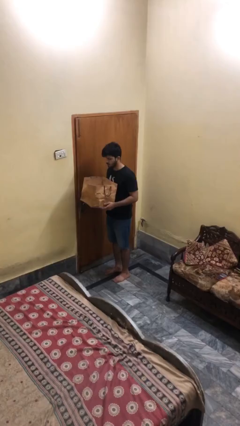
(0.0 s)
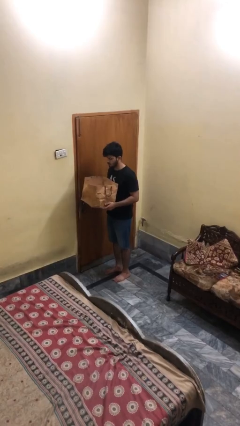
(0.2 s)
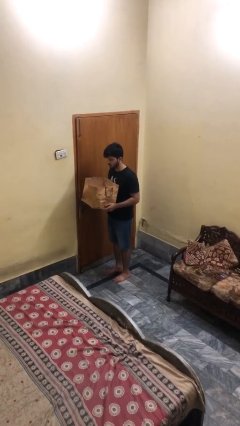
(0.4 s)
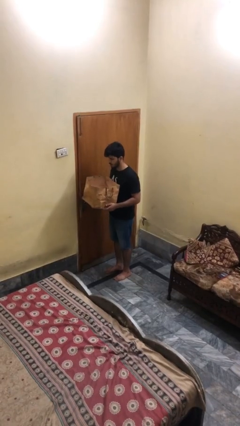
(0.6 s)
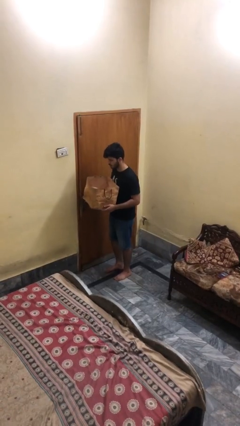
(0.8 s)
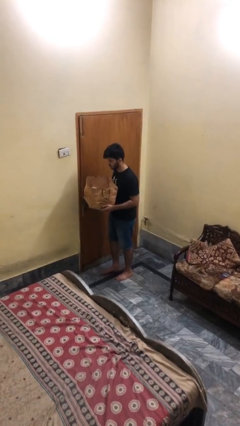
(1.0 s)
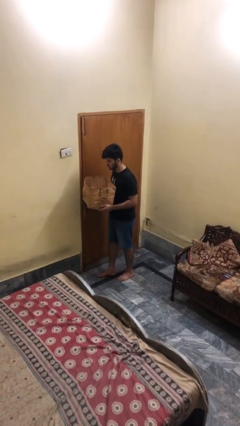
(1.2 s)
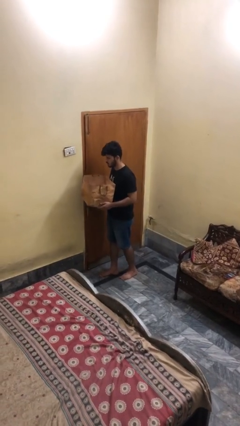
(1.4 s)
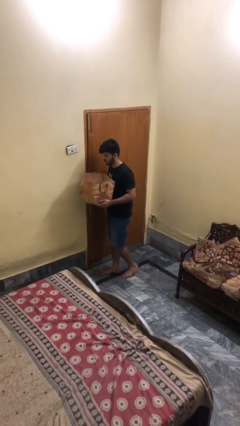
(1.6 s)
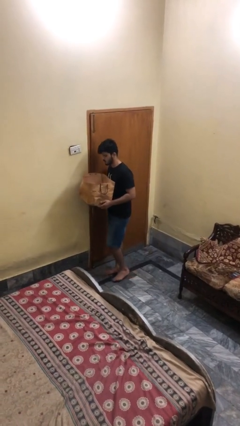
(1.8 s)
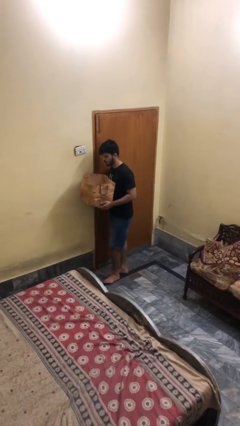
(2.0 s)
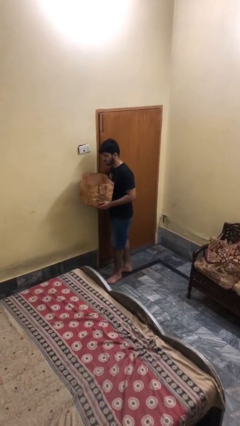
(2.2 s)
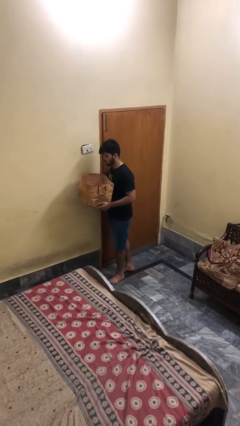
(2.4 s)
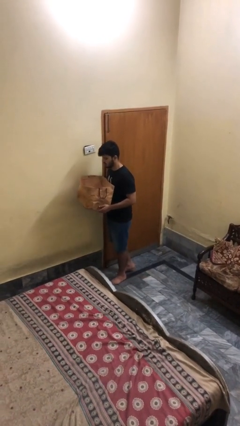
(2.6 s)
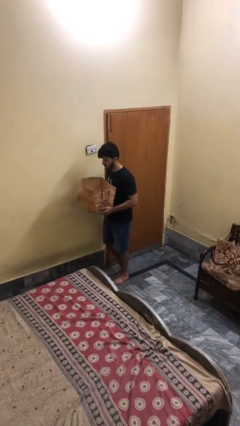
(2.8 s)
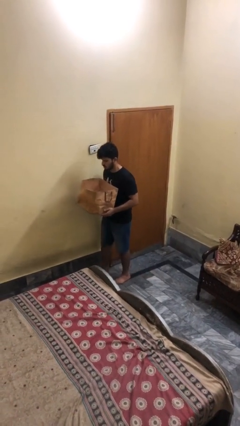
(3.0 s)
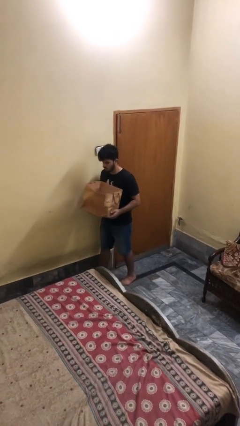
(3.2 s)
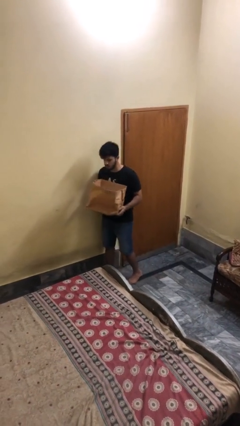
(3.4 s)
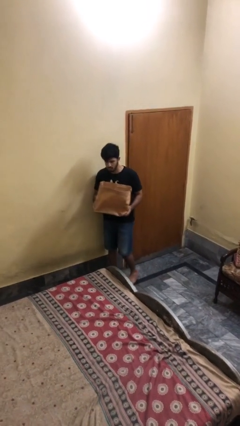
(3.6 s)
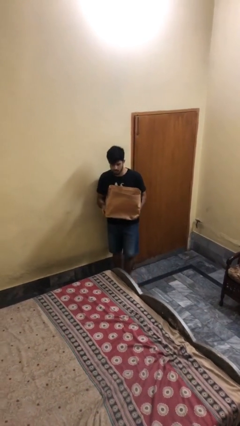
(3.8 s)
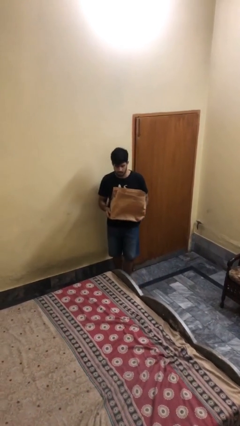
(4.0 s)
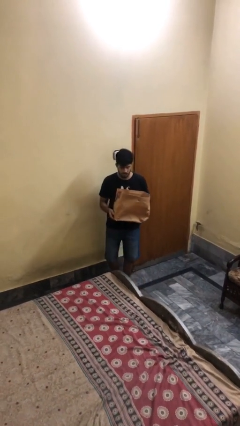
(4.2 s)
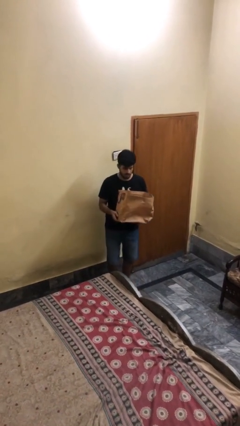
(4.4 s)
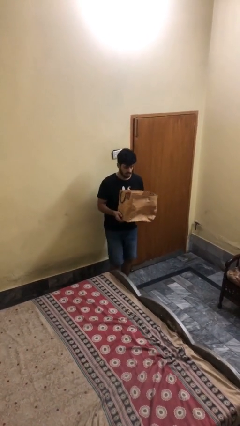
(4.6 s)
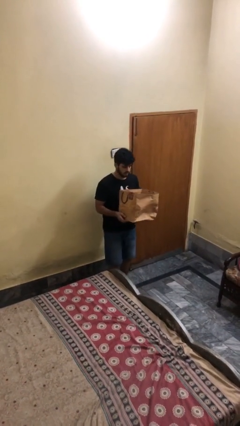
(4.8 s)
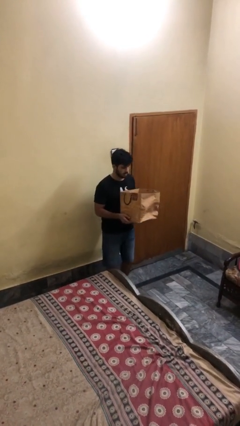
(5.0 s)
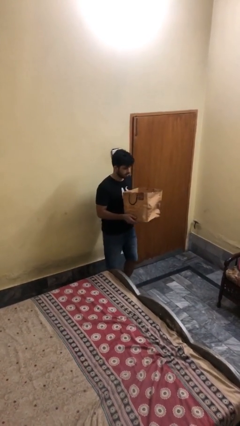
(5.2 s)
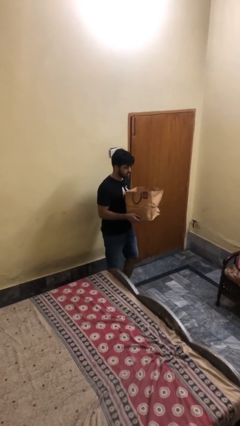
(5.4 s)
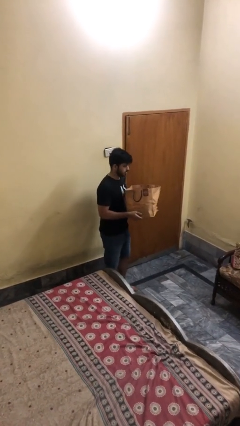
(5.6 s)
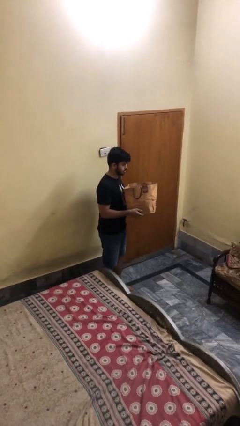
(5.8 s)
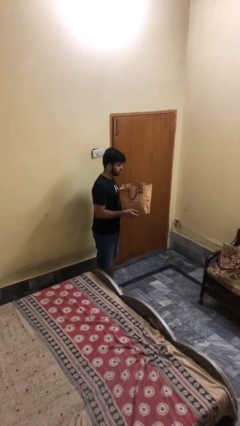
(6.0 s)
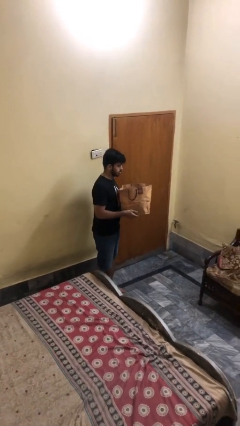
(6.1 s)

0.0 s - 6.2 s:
person carries groceries

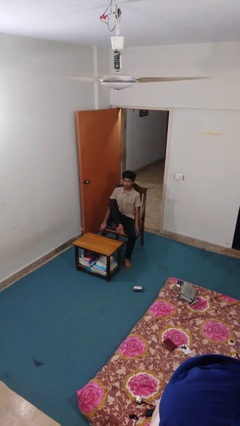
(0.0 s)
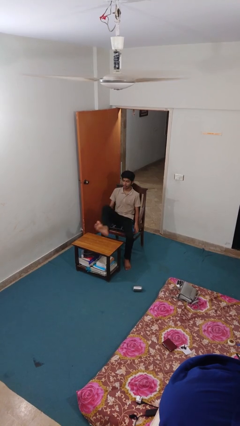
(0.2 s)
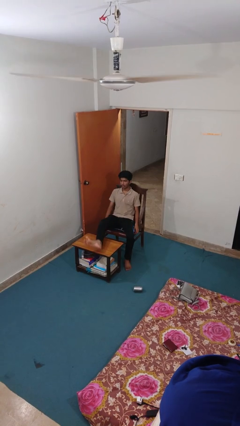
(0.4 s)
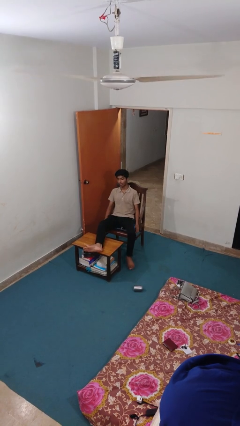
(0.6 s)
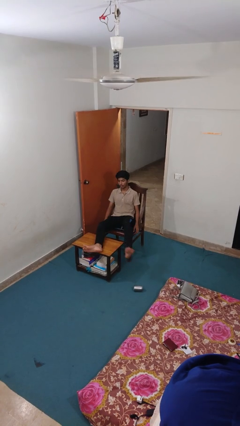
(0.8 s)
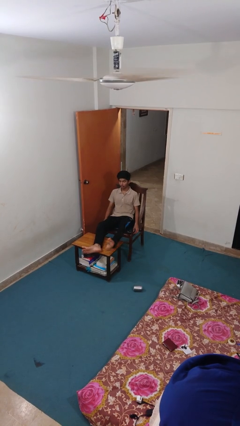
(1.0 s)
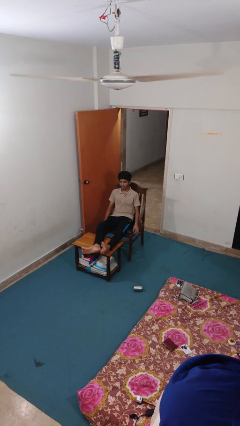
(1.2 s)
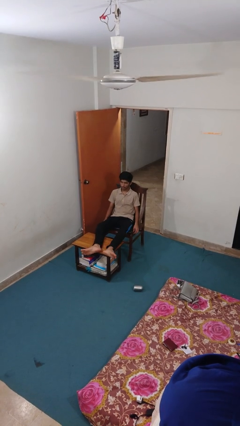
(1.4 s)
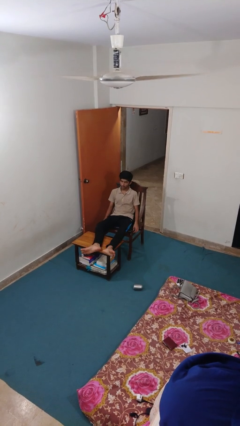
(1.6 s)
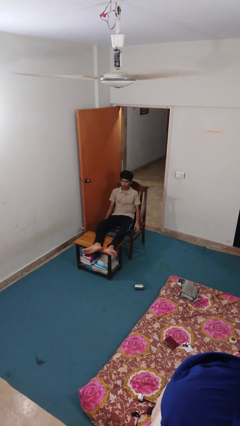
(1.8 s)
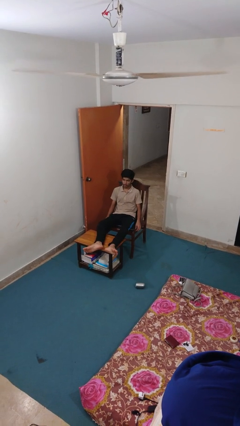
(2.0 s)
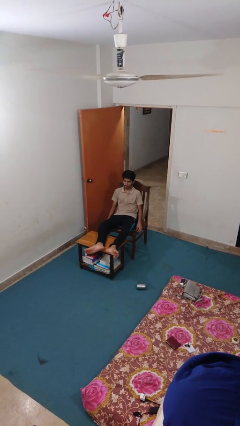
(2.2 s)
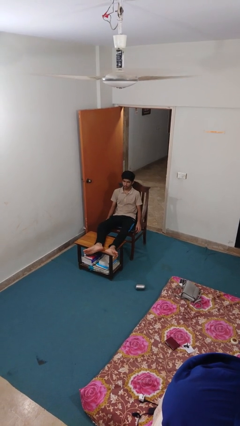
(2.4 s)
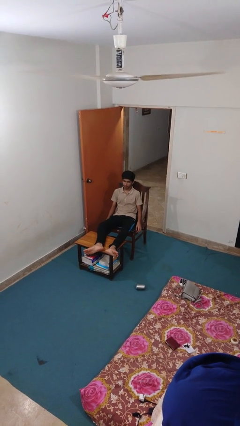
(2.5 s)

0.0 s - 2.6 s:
person puts feet up

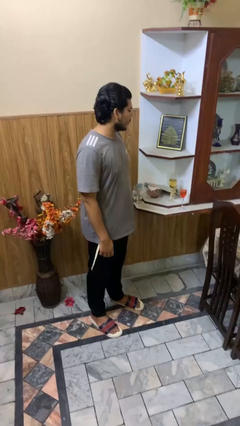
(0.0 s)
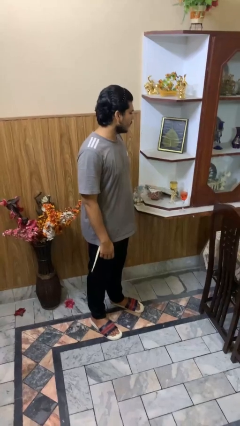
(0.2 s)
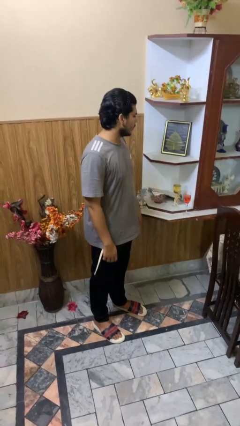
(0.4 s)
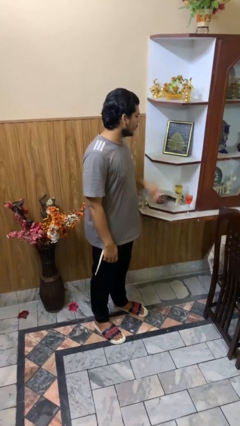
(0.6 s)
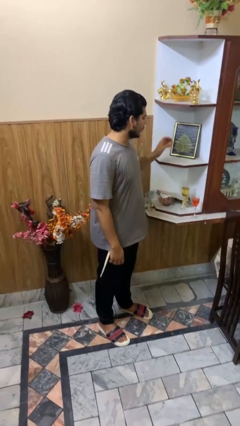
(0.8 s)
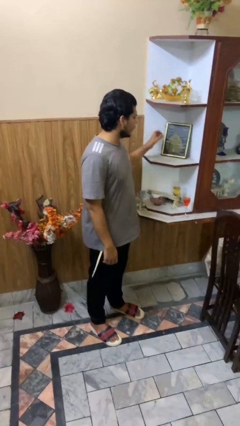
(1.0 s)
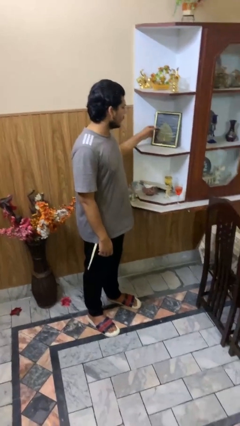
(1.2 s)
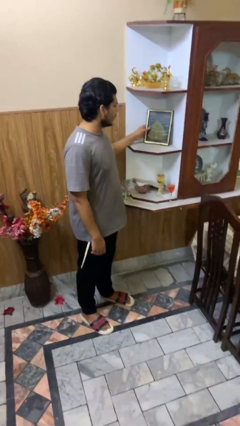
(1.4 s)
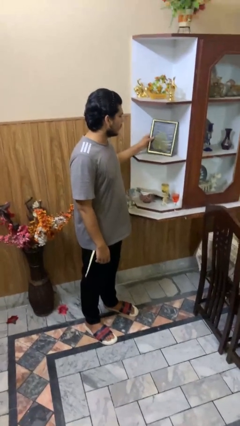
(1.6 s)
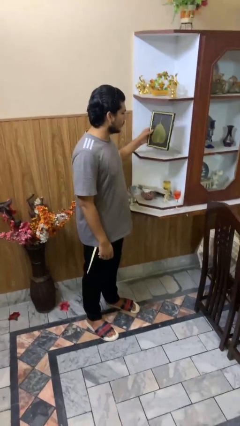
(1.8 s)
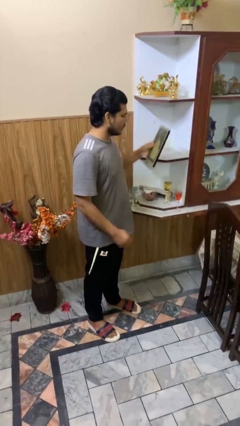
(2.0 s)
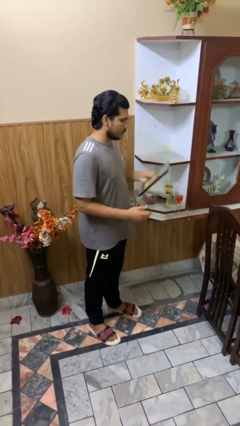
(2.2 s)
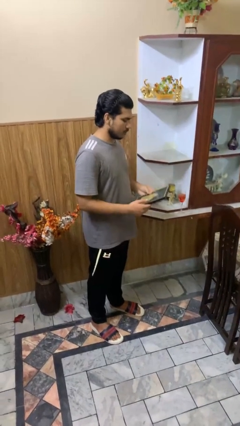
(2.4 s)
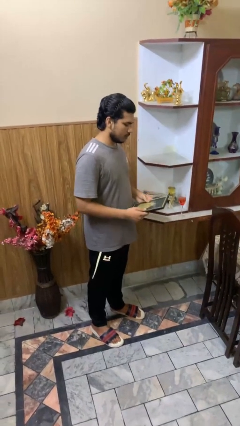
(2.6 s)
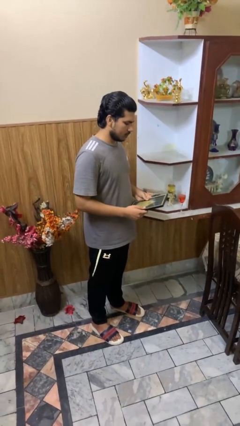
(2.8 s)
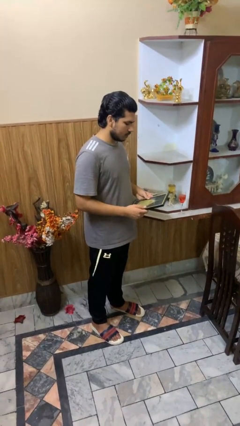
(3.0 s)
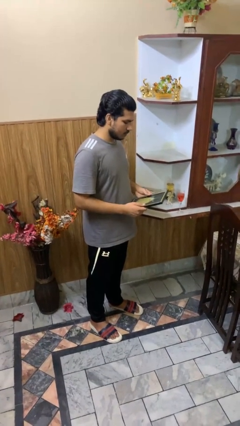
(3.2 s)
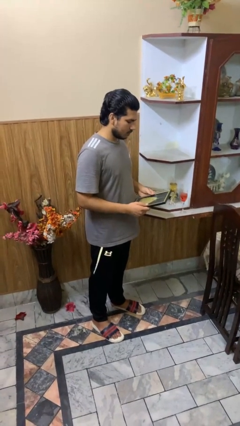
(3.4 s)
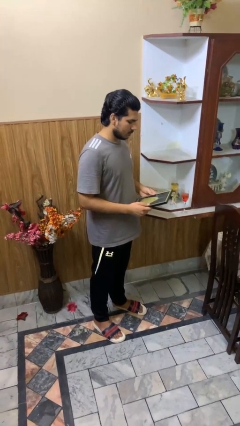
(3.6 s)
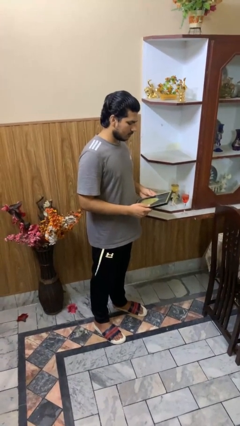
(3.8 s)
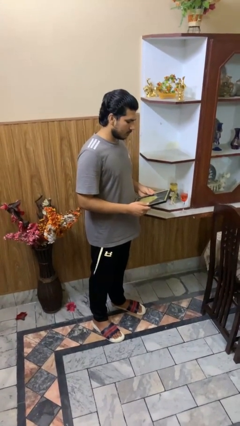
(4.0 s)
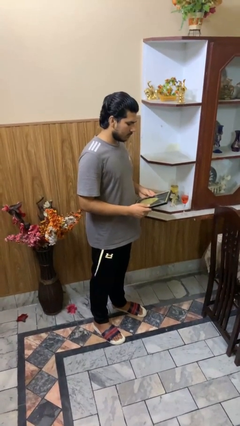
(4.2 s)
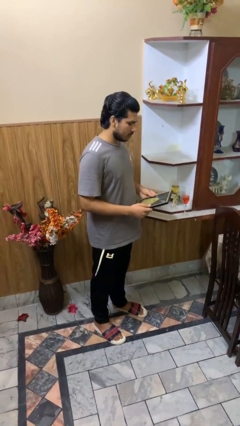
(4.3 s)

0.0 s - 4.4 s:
person takes down picture frame

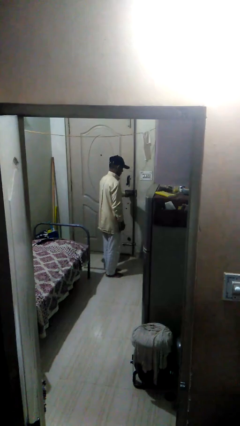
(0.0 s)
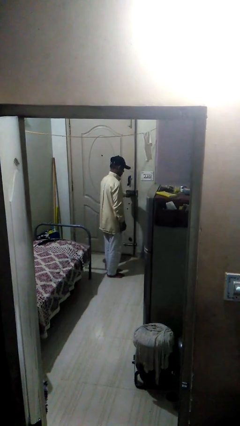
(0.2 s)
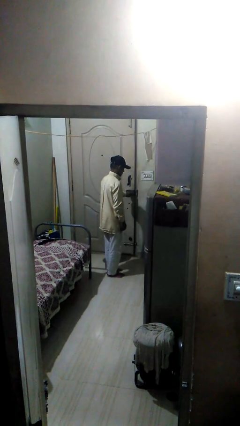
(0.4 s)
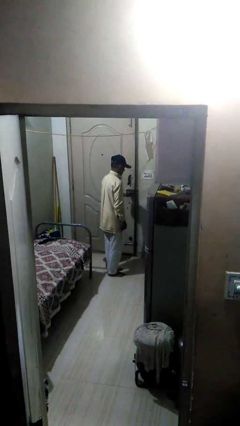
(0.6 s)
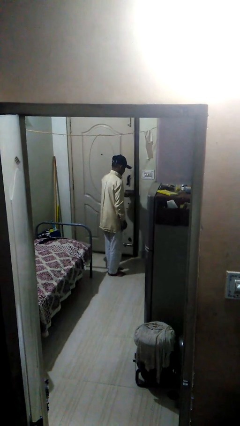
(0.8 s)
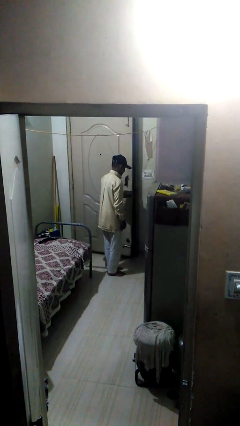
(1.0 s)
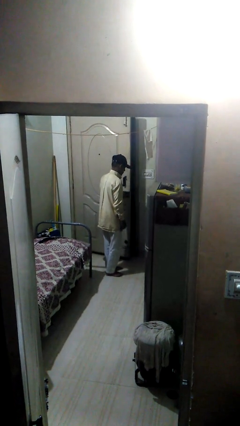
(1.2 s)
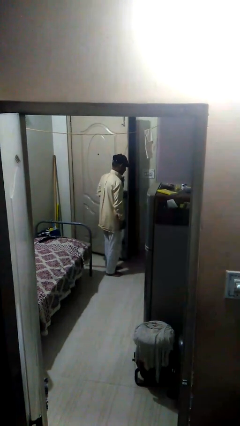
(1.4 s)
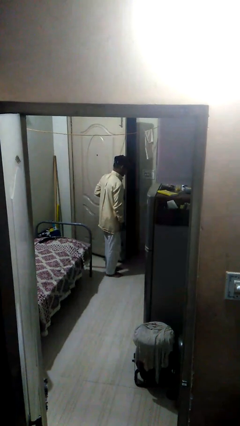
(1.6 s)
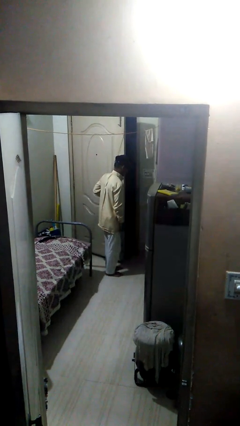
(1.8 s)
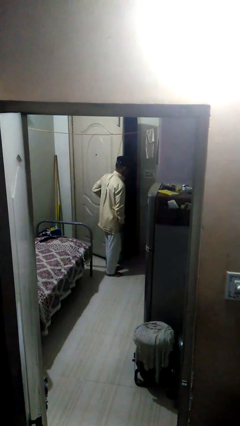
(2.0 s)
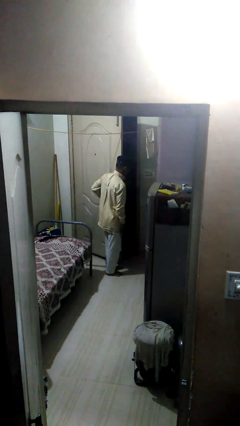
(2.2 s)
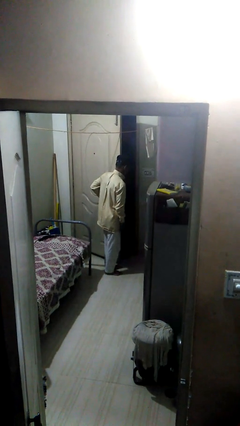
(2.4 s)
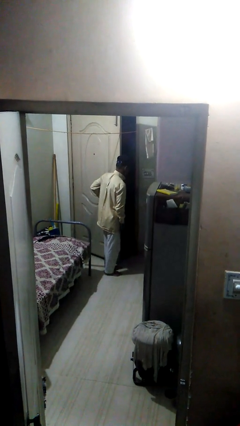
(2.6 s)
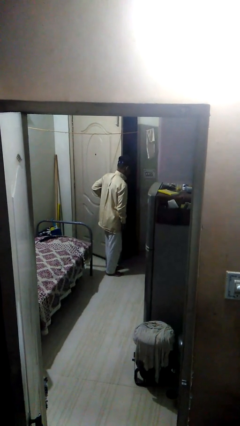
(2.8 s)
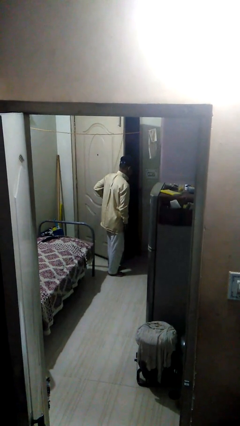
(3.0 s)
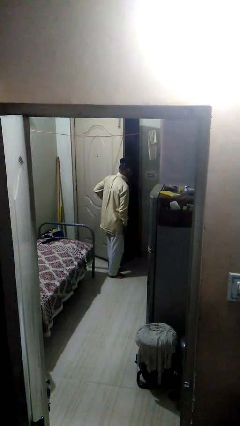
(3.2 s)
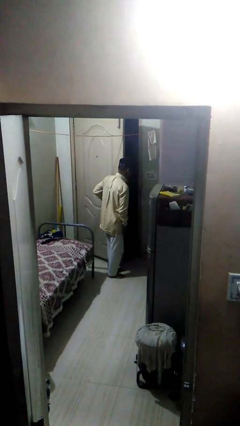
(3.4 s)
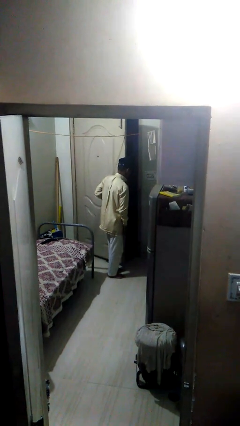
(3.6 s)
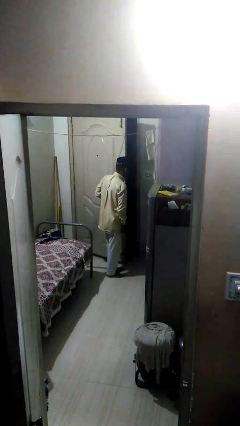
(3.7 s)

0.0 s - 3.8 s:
person opens facility door

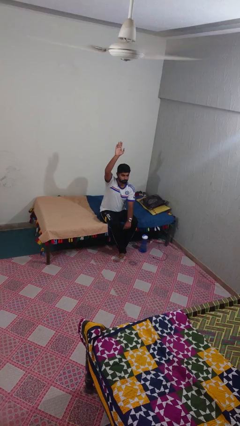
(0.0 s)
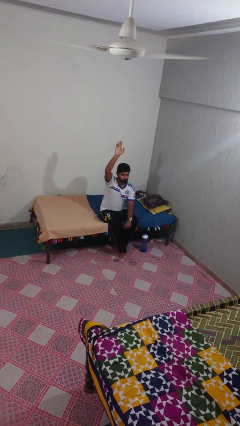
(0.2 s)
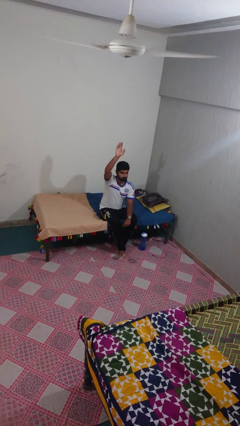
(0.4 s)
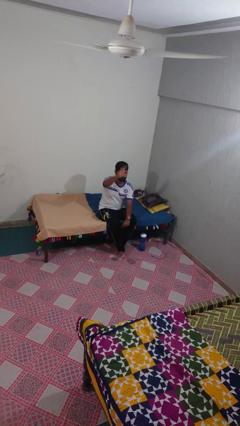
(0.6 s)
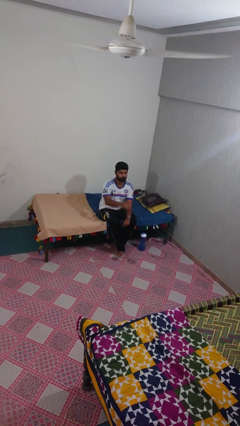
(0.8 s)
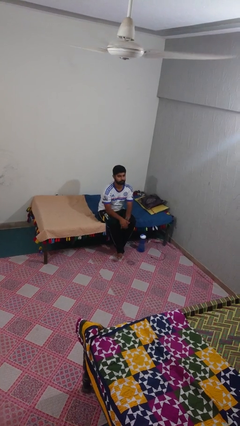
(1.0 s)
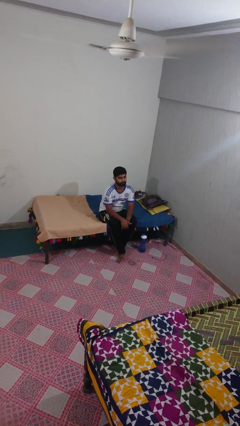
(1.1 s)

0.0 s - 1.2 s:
person gestures lower hand
